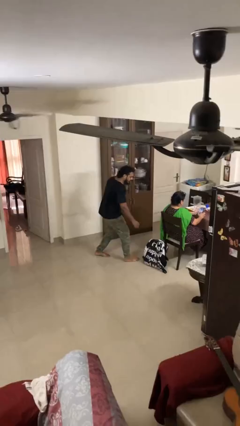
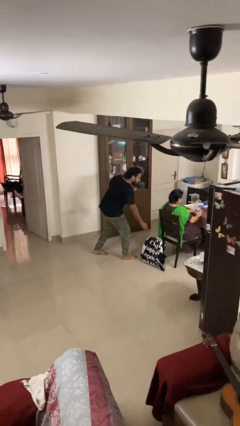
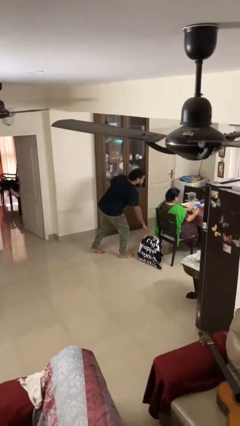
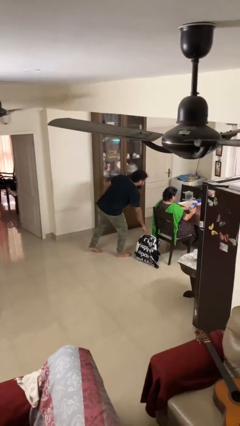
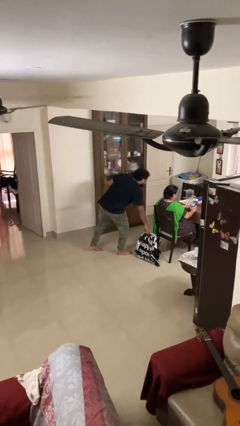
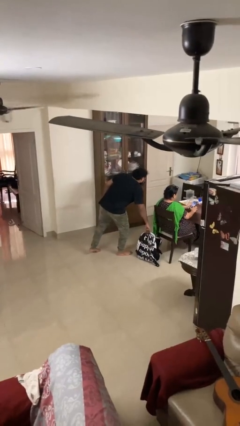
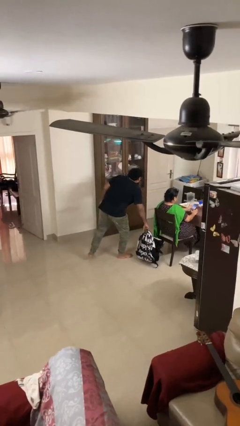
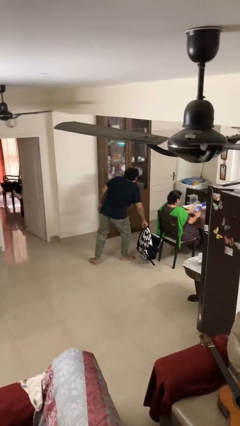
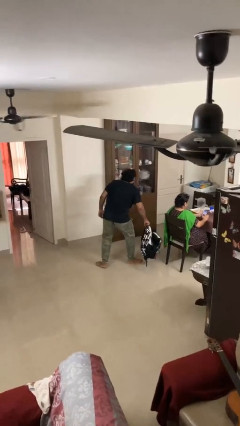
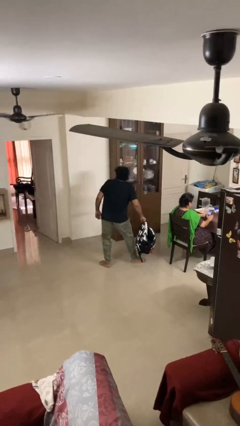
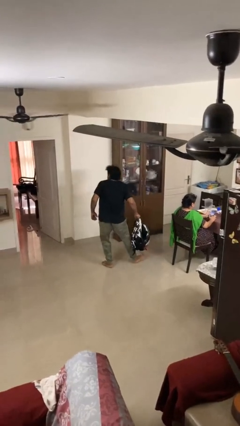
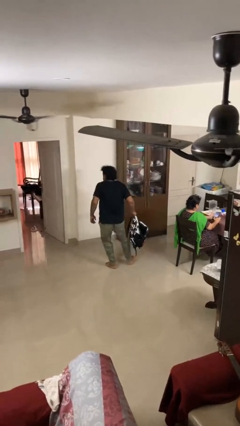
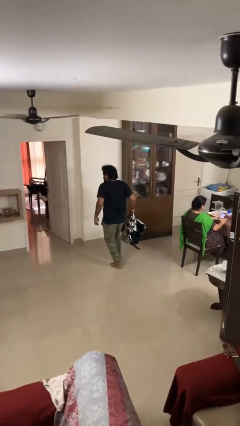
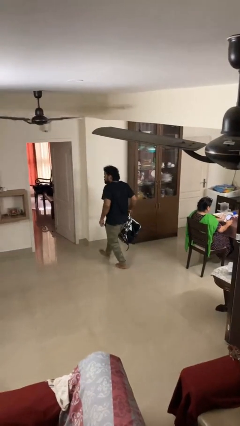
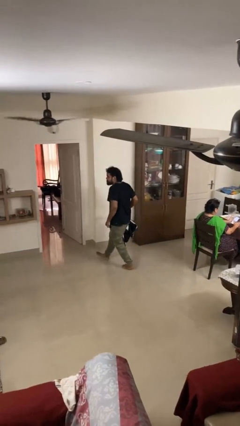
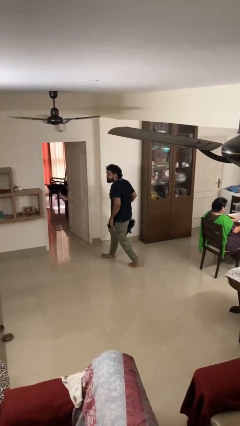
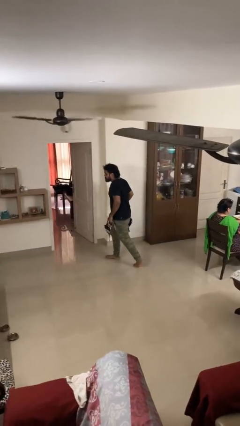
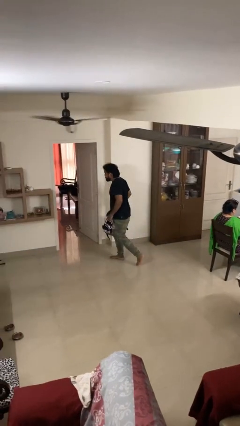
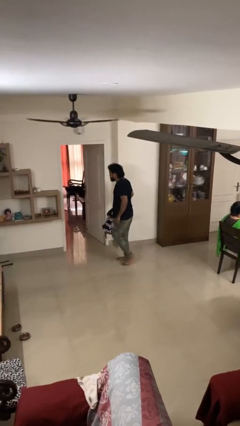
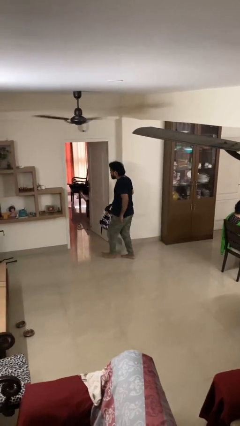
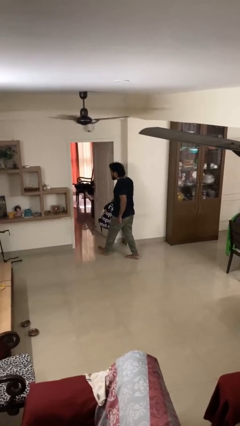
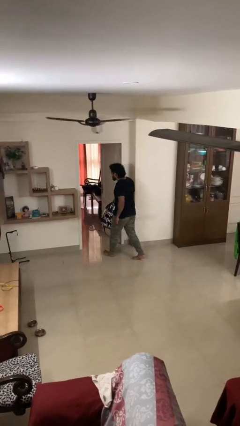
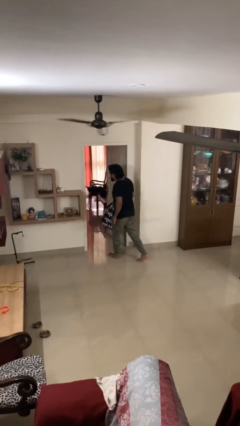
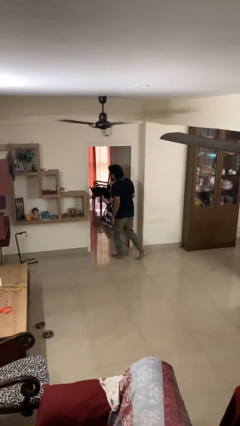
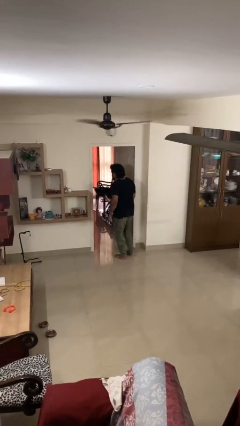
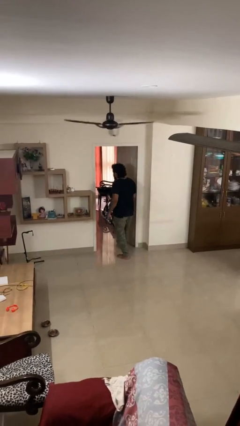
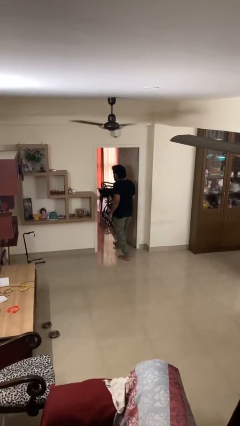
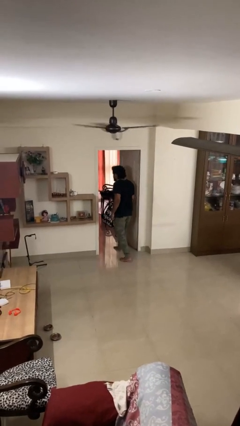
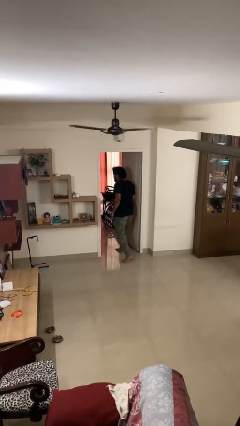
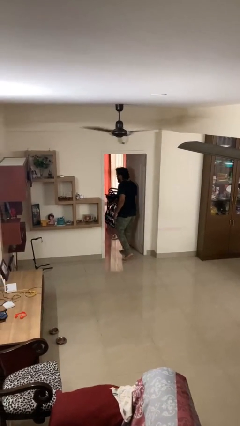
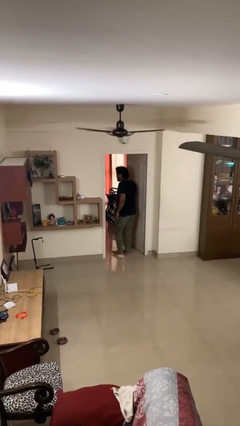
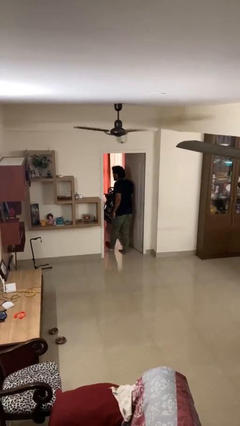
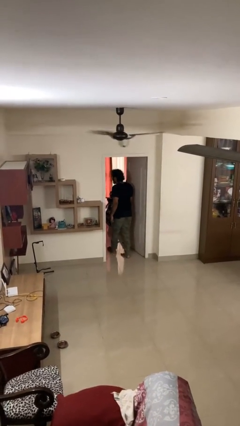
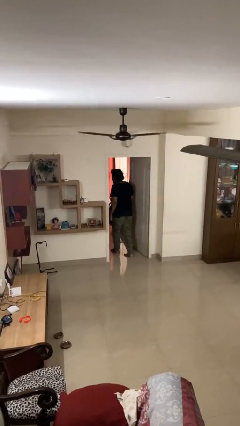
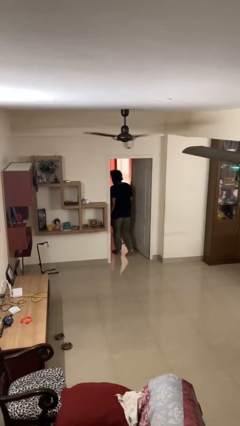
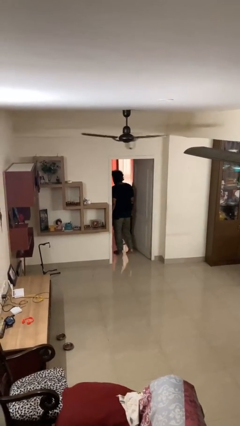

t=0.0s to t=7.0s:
person steals object from person

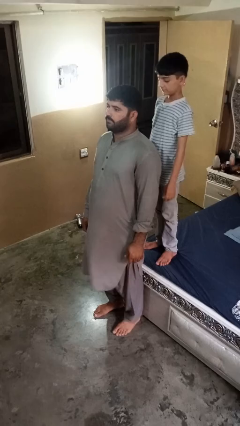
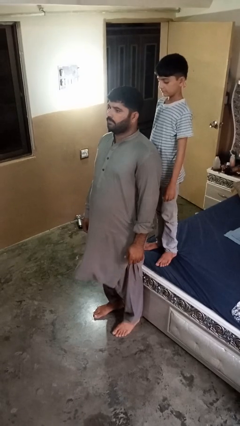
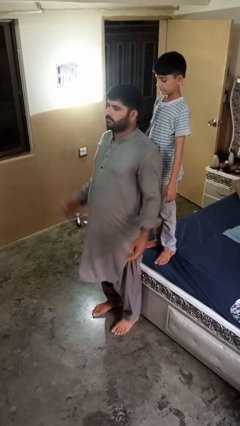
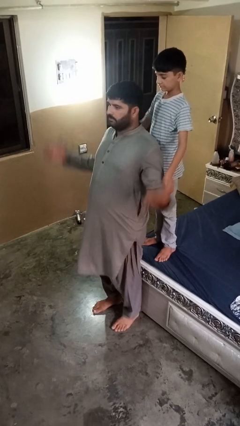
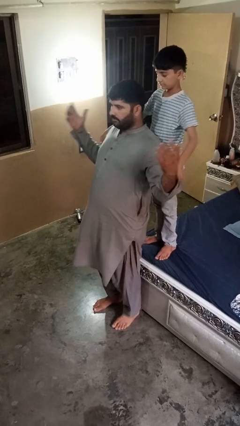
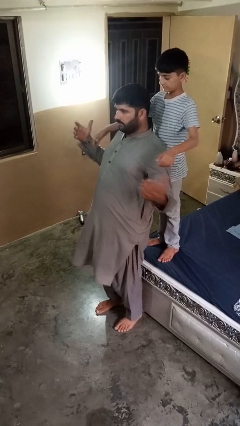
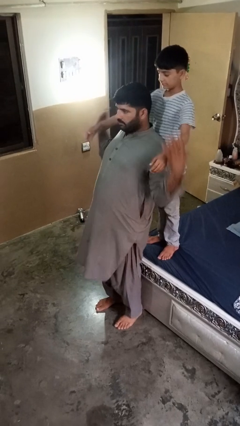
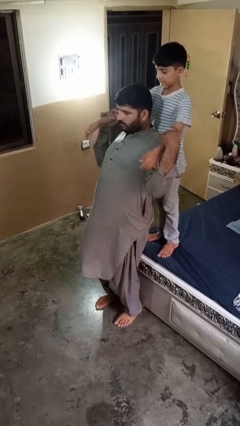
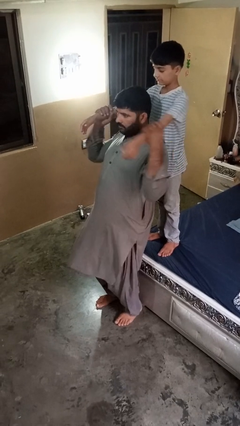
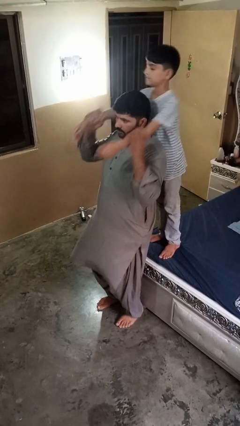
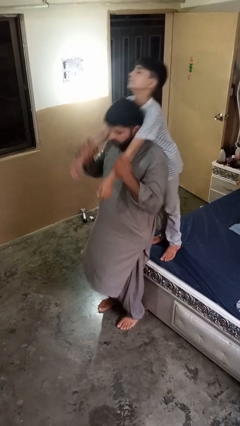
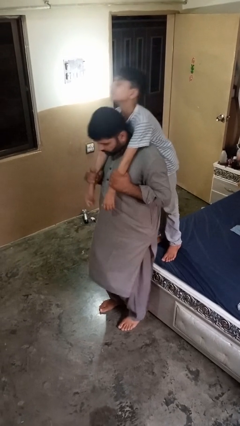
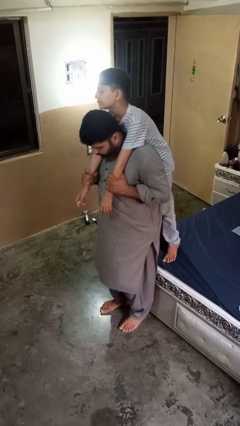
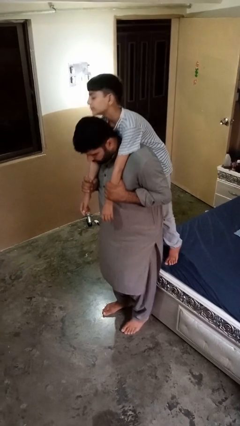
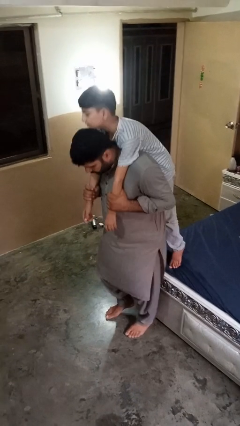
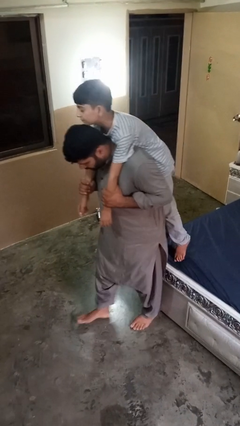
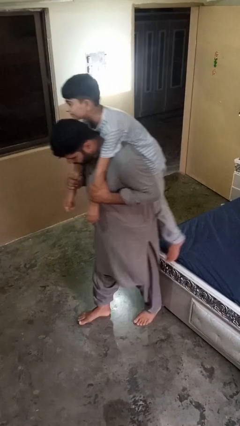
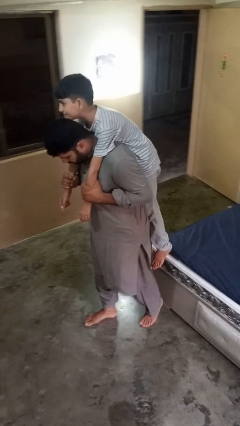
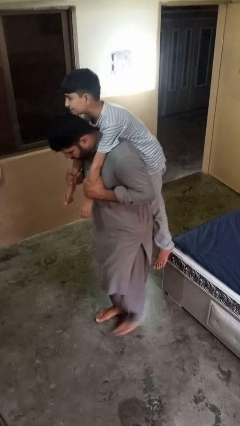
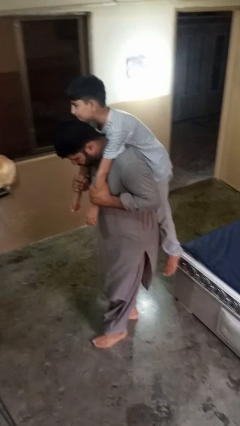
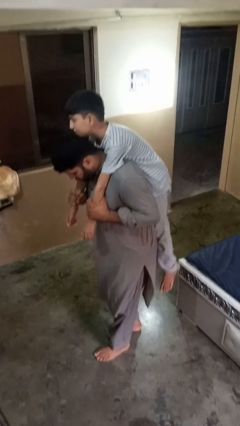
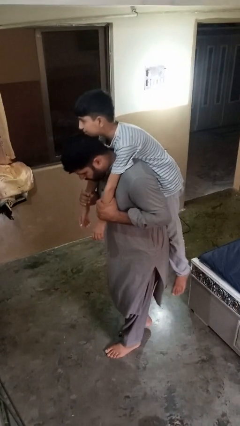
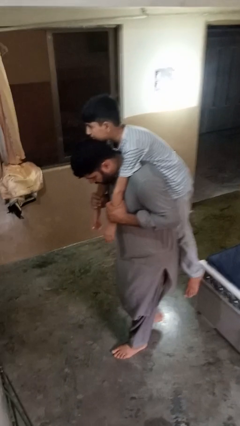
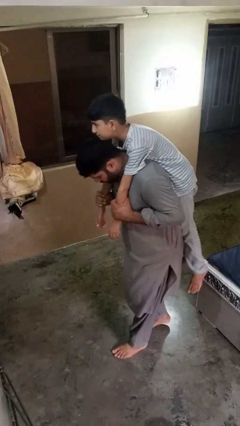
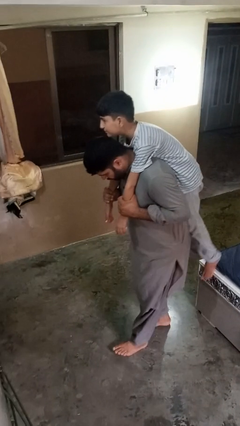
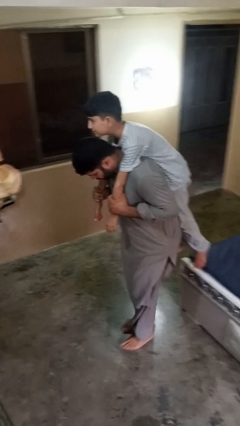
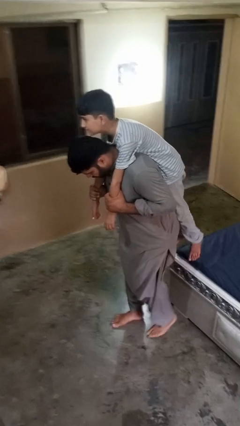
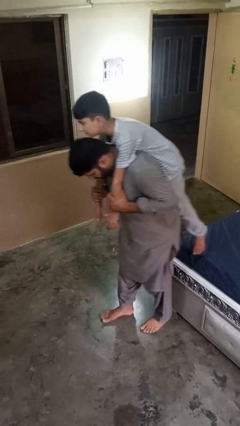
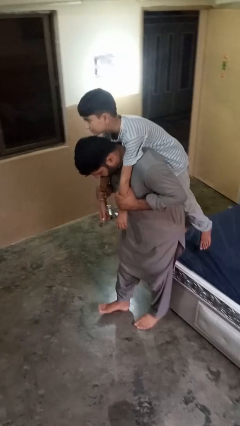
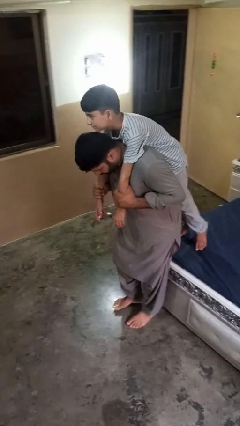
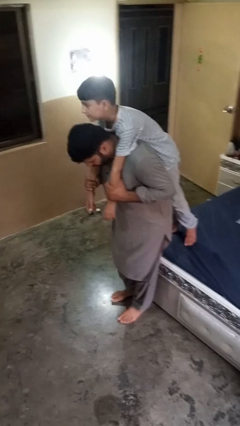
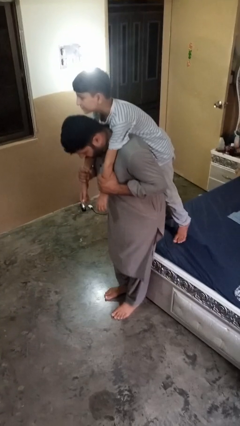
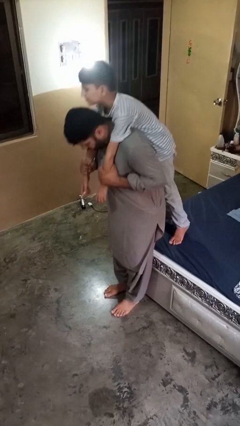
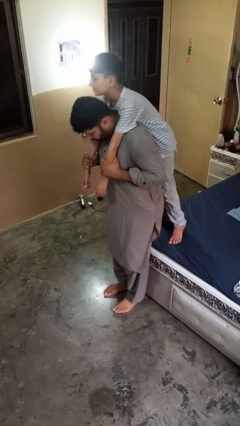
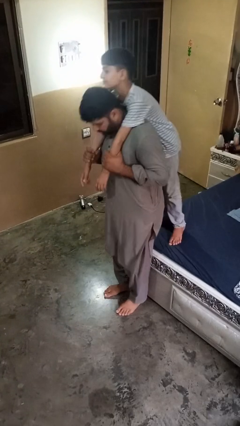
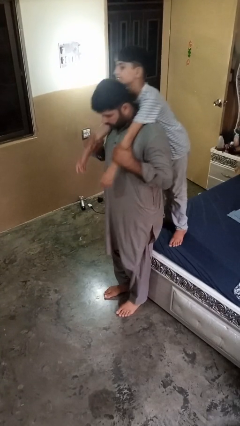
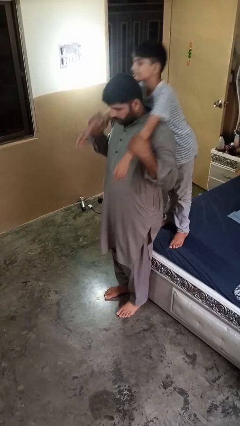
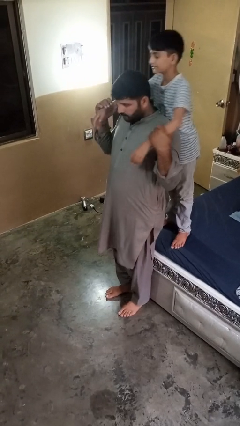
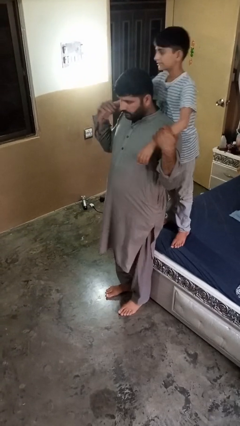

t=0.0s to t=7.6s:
person carries person on back

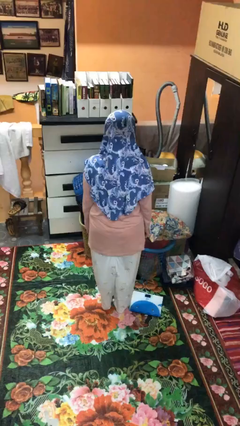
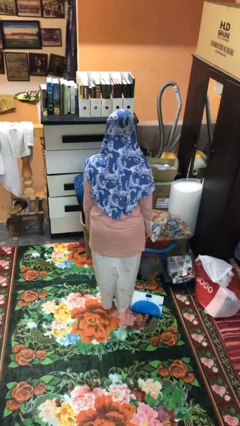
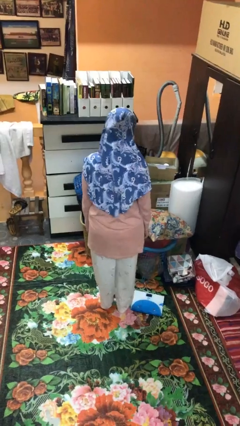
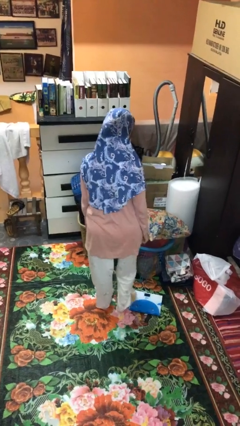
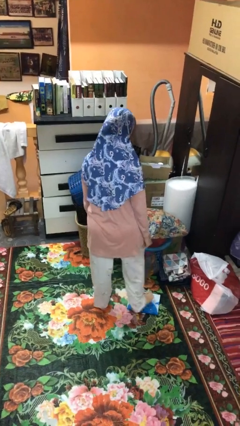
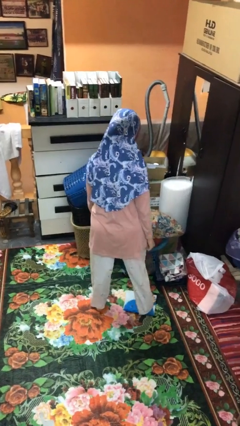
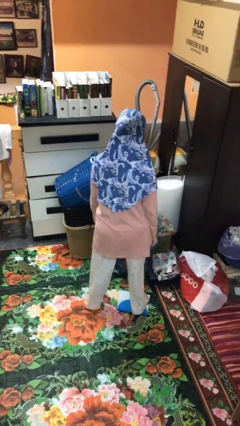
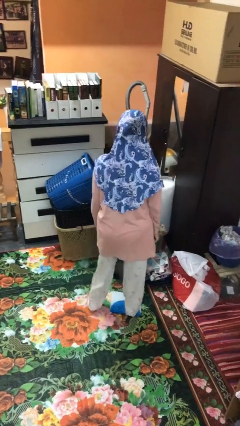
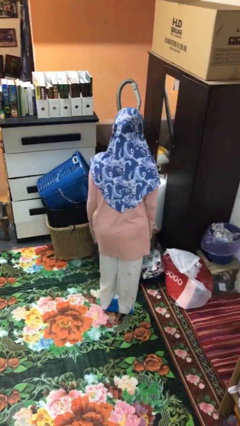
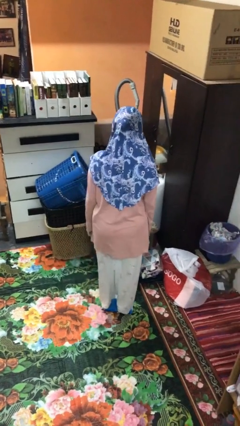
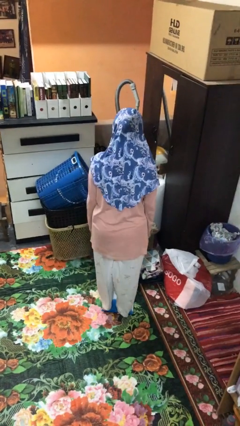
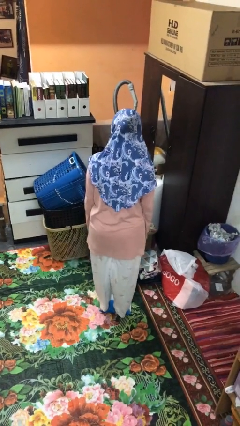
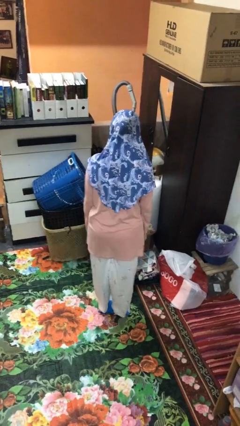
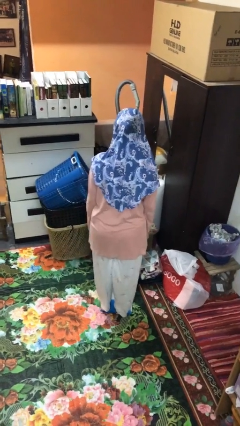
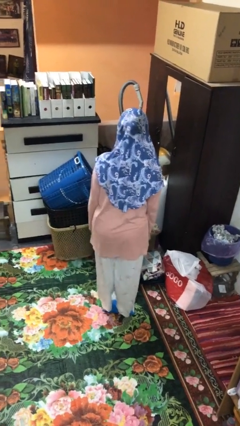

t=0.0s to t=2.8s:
person uses bodyweight scale

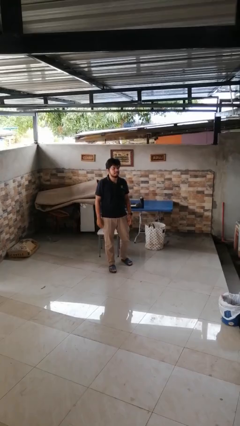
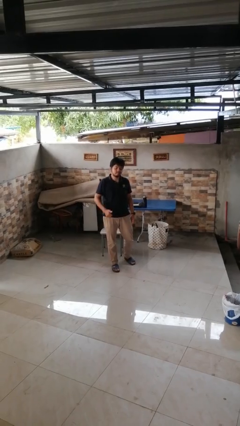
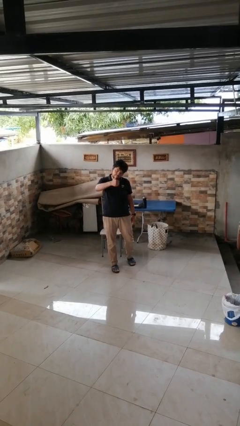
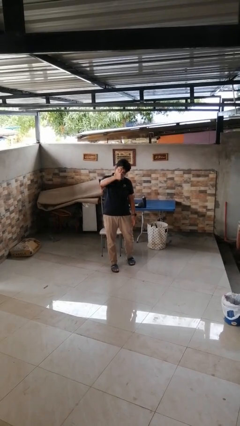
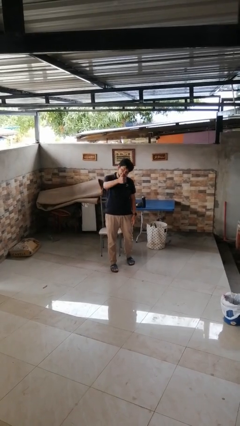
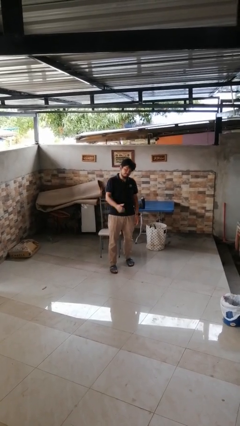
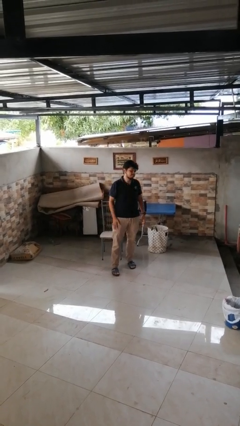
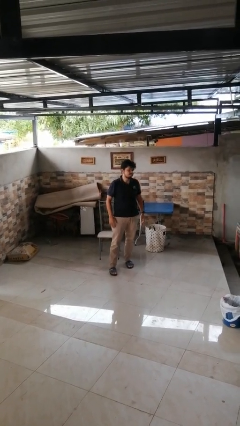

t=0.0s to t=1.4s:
person gestures thumbs up
